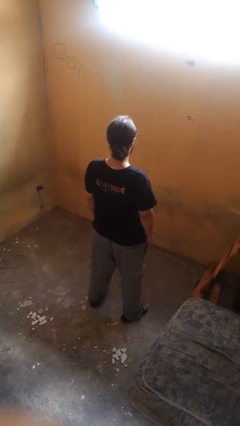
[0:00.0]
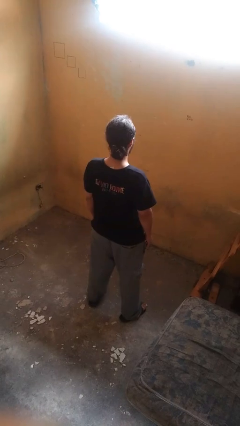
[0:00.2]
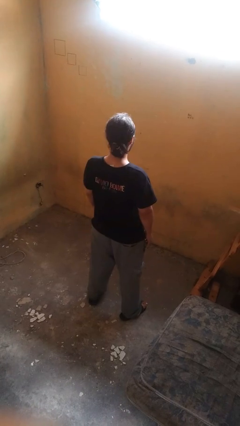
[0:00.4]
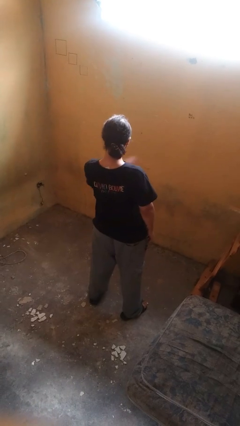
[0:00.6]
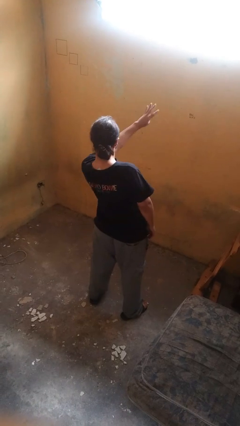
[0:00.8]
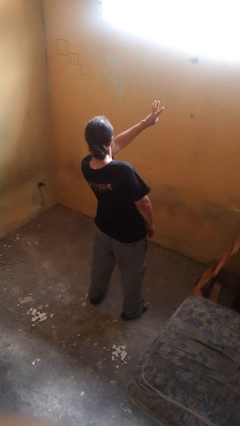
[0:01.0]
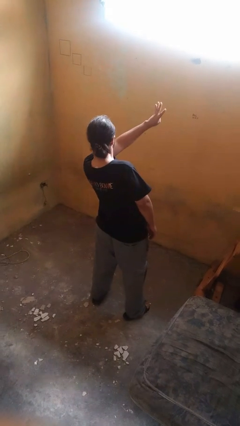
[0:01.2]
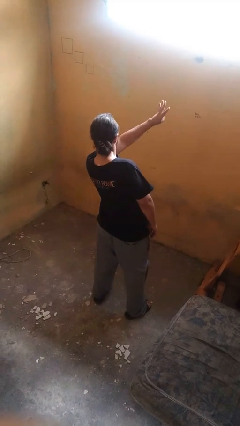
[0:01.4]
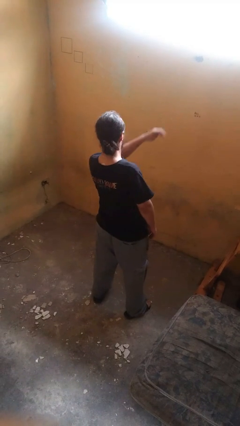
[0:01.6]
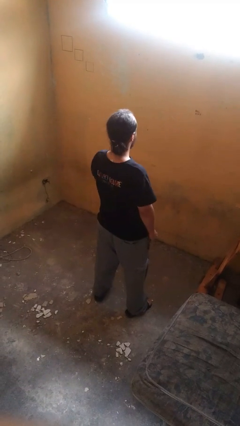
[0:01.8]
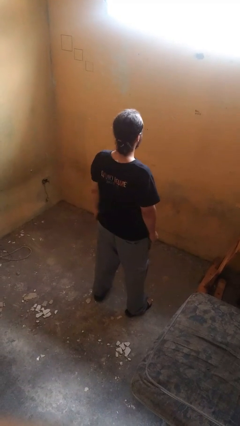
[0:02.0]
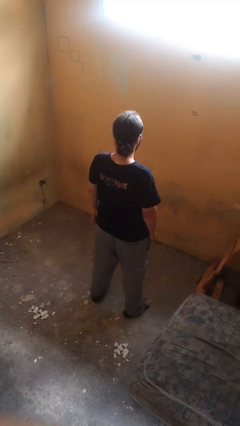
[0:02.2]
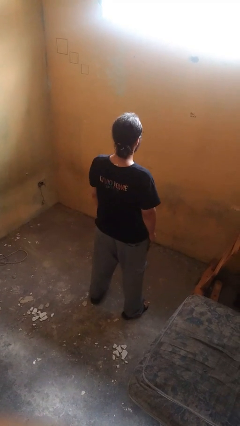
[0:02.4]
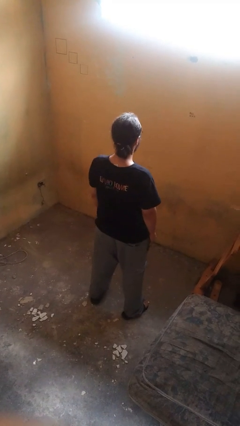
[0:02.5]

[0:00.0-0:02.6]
person gestures number four

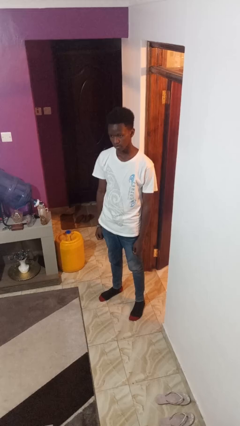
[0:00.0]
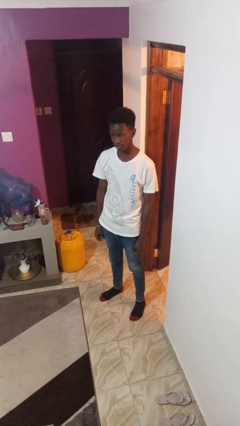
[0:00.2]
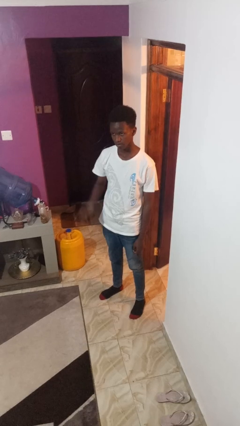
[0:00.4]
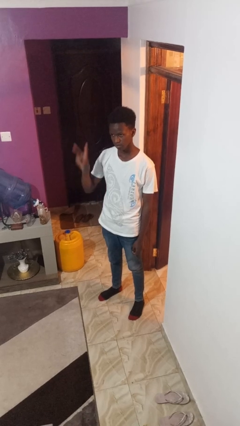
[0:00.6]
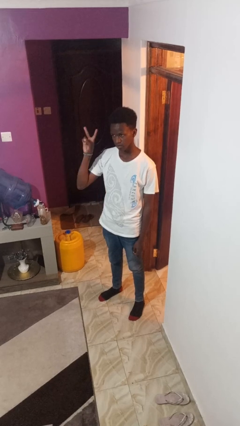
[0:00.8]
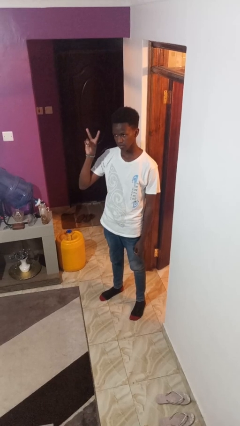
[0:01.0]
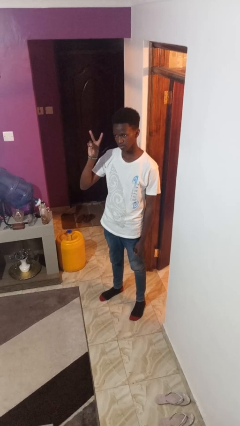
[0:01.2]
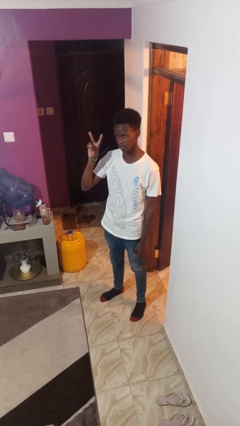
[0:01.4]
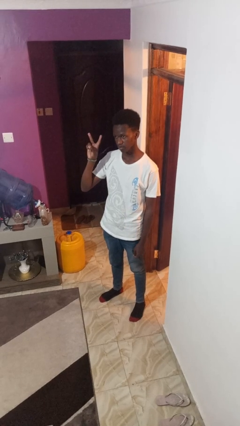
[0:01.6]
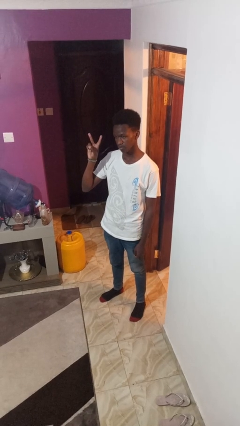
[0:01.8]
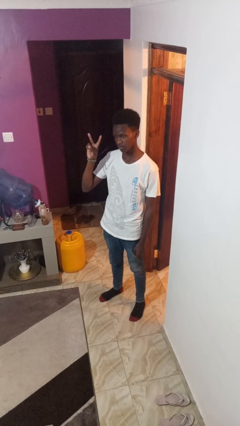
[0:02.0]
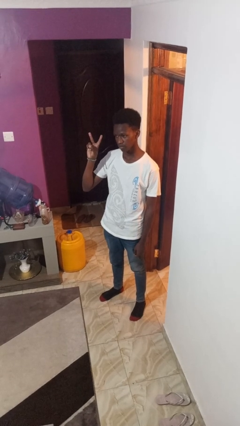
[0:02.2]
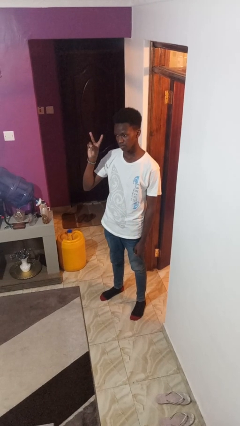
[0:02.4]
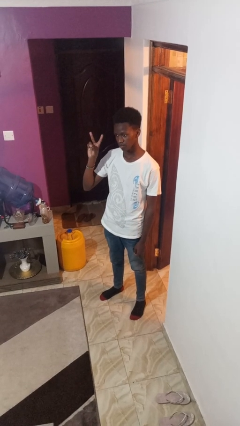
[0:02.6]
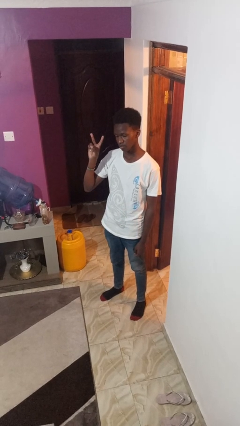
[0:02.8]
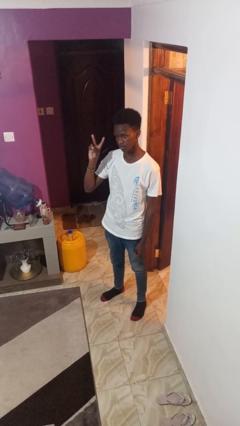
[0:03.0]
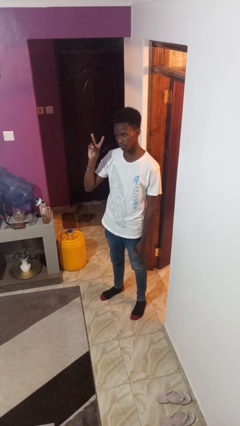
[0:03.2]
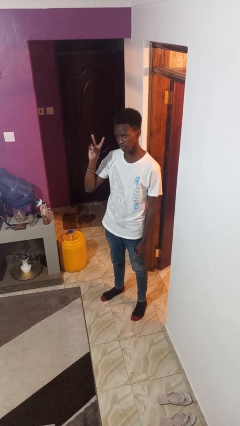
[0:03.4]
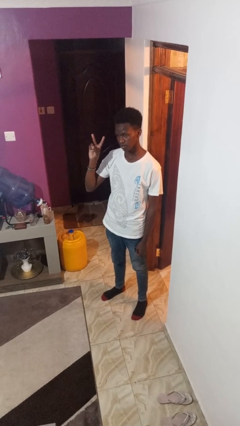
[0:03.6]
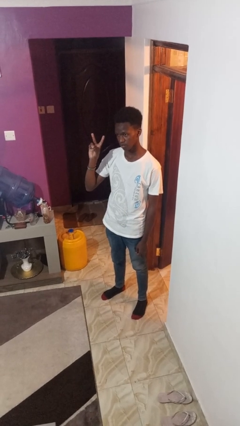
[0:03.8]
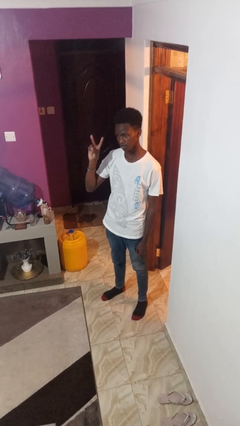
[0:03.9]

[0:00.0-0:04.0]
person gestures peace

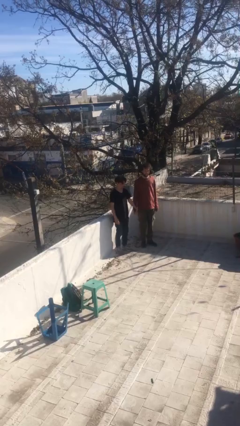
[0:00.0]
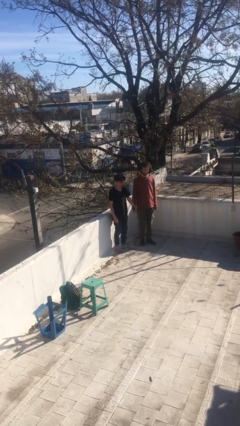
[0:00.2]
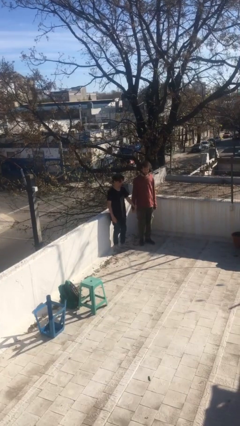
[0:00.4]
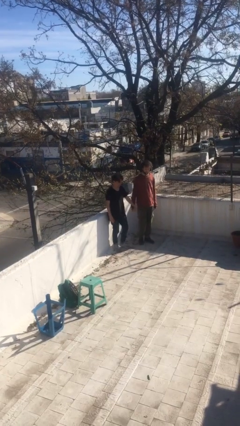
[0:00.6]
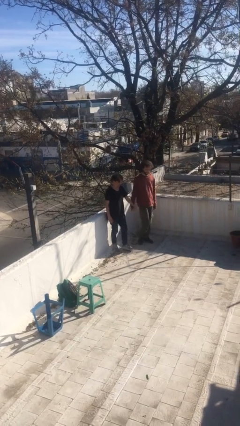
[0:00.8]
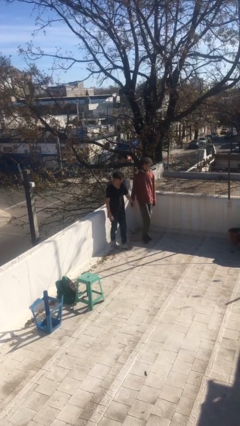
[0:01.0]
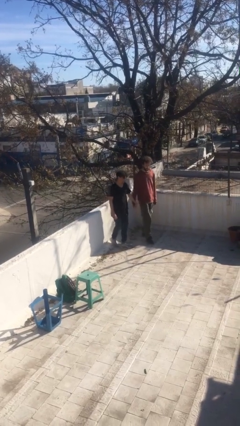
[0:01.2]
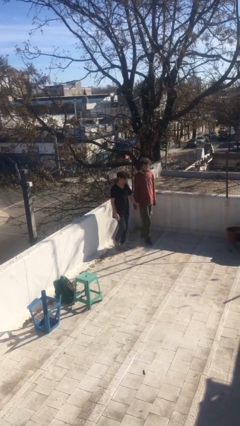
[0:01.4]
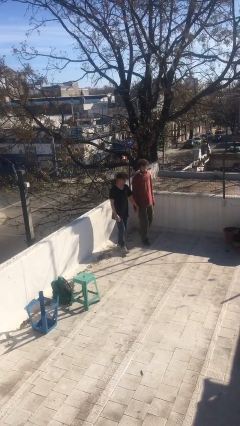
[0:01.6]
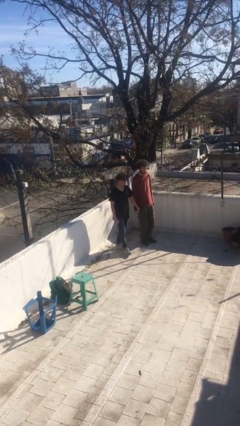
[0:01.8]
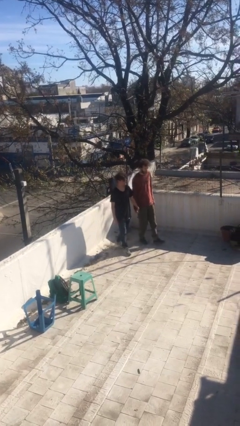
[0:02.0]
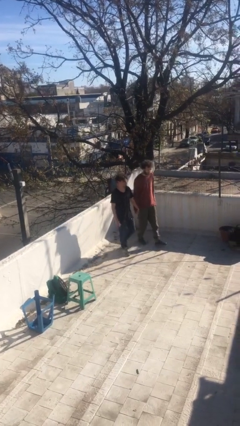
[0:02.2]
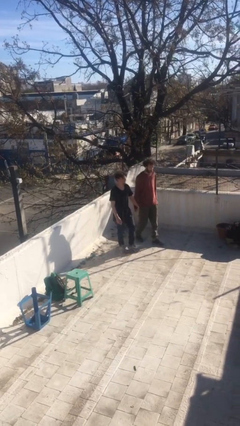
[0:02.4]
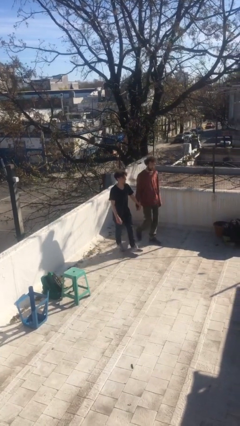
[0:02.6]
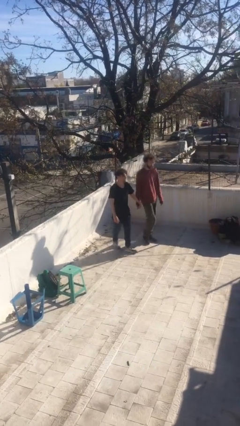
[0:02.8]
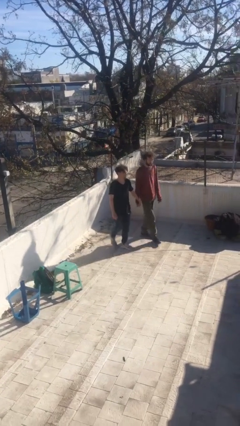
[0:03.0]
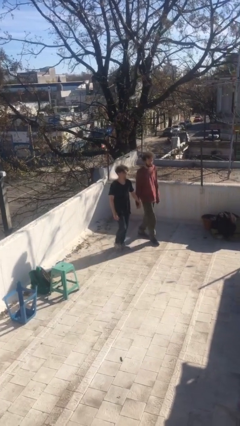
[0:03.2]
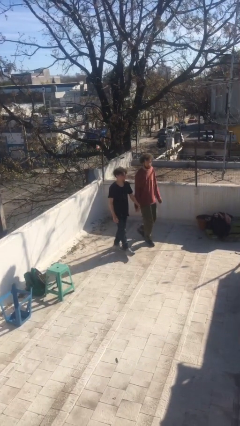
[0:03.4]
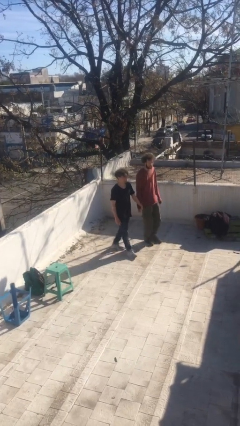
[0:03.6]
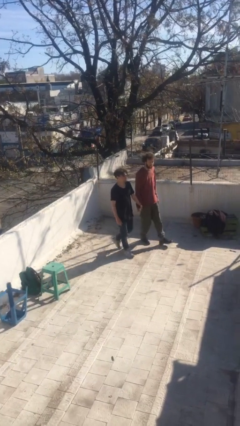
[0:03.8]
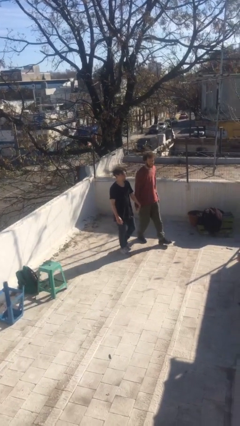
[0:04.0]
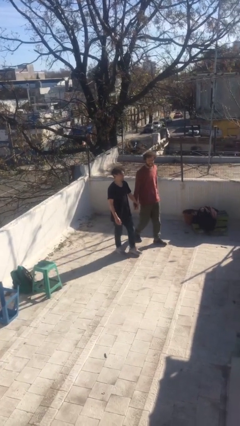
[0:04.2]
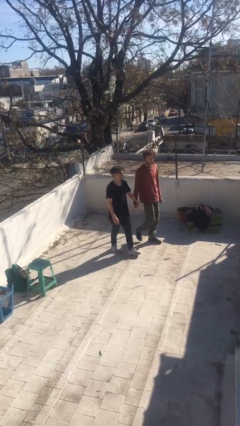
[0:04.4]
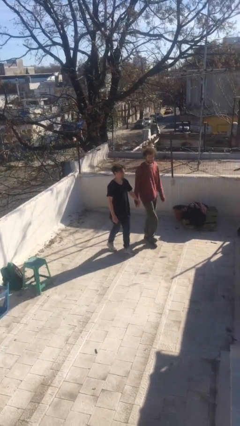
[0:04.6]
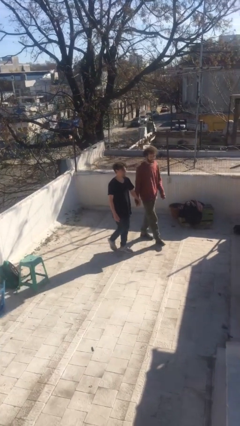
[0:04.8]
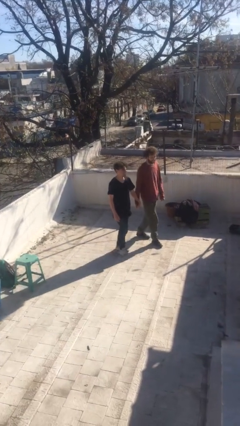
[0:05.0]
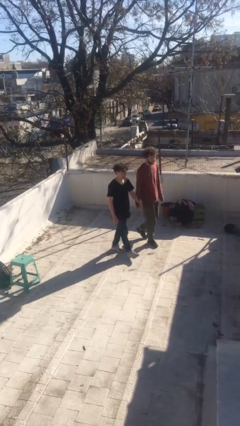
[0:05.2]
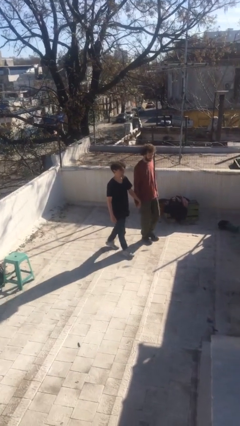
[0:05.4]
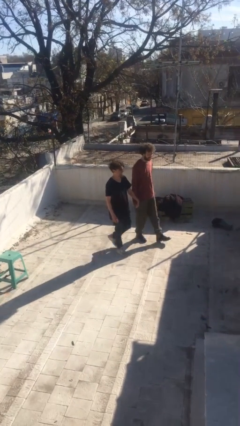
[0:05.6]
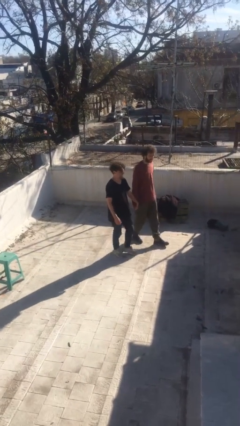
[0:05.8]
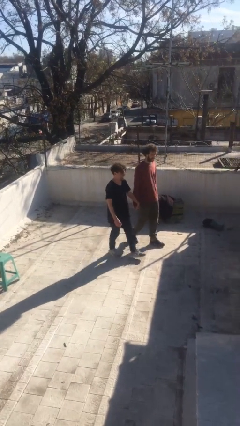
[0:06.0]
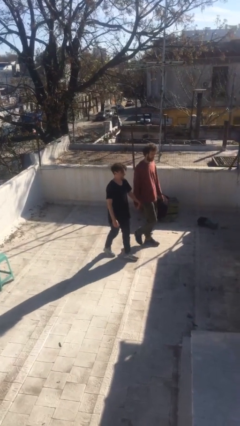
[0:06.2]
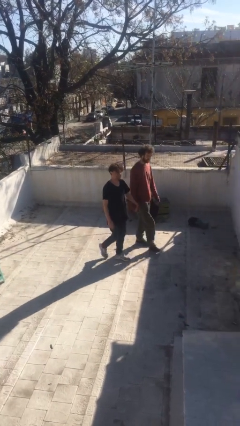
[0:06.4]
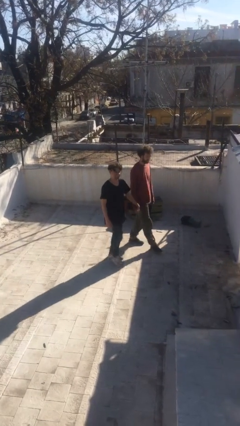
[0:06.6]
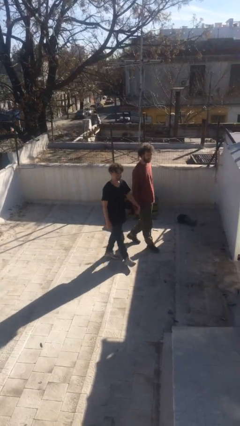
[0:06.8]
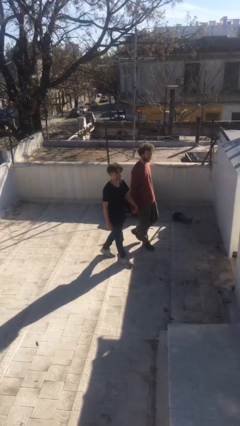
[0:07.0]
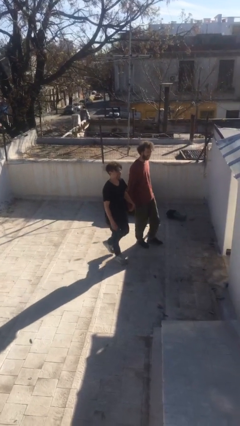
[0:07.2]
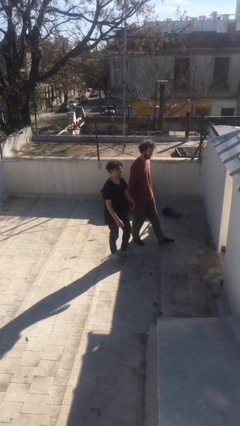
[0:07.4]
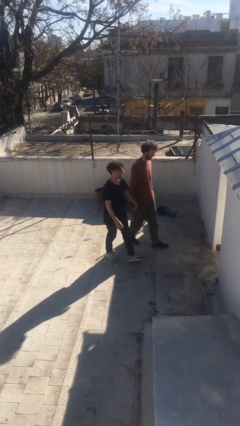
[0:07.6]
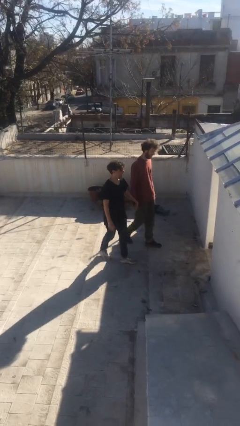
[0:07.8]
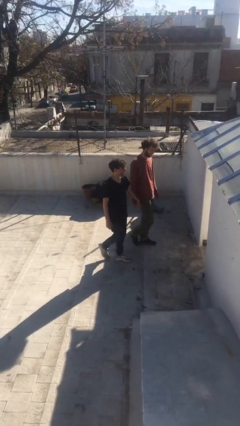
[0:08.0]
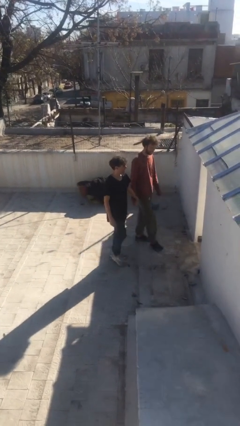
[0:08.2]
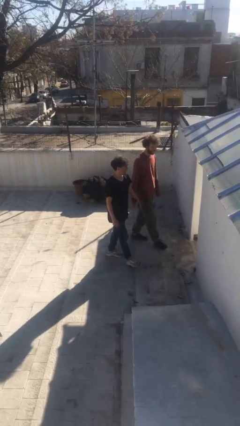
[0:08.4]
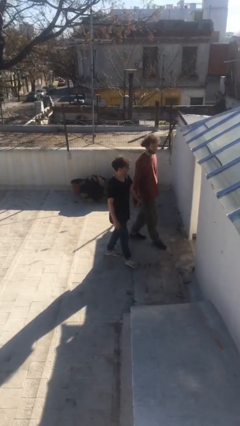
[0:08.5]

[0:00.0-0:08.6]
person holds hand

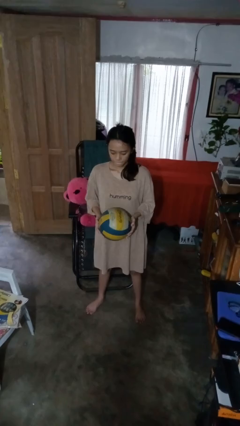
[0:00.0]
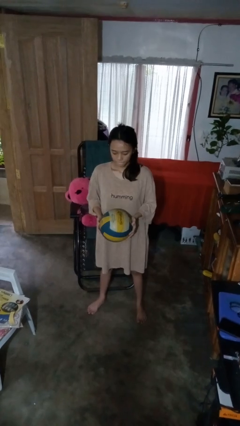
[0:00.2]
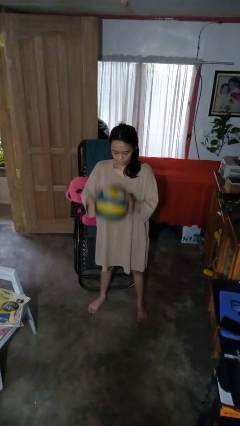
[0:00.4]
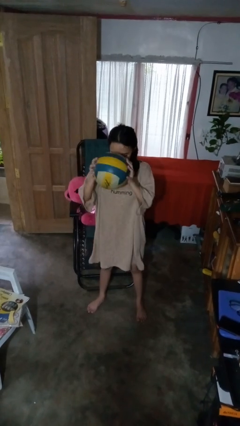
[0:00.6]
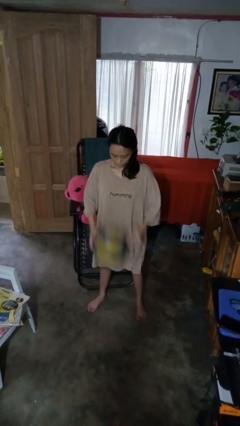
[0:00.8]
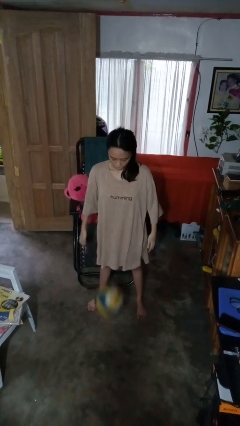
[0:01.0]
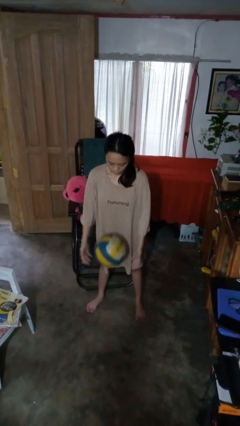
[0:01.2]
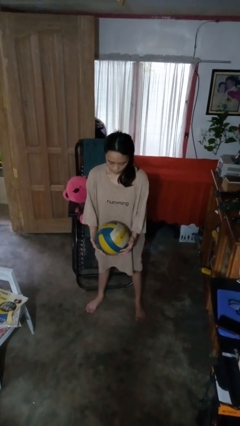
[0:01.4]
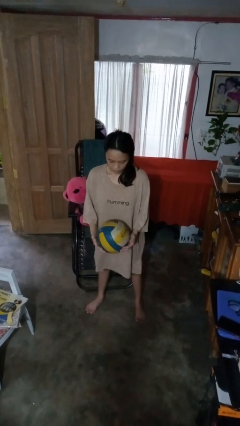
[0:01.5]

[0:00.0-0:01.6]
person bounces ball on floor

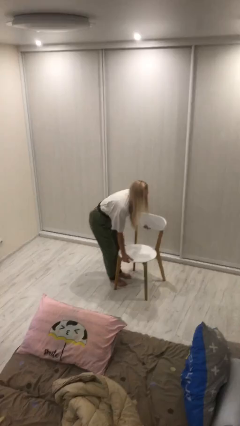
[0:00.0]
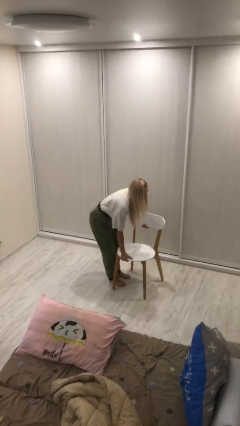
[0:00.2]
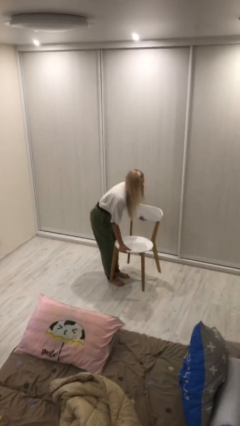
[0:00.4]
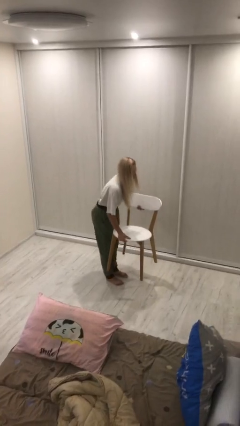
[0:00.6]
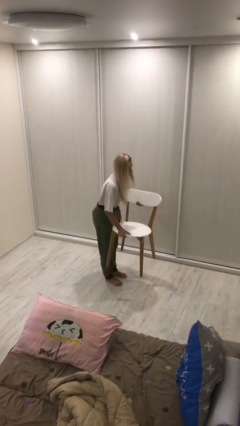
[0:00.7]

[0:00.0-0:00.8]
person picks up object from floor
